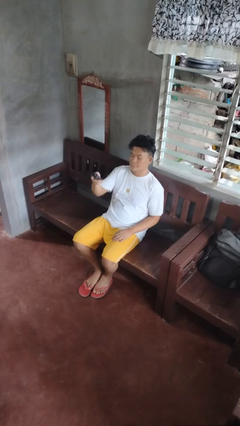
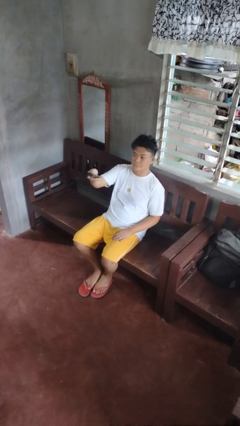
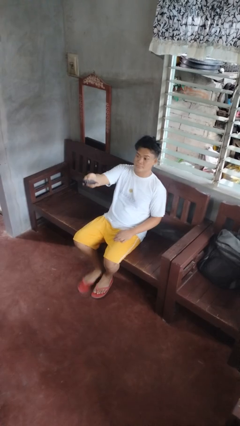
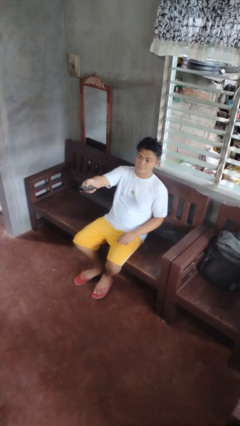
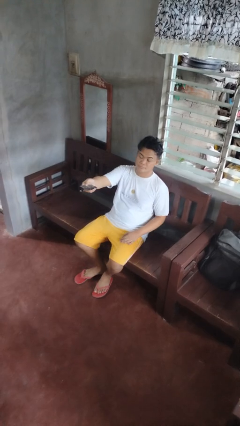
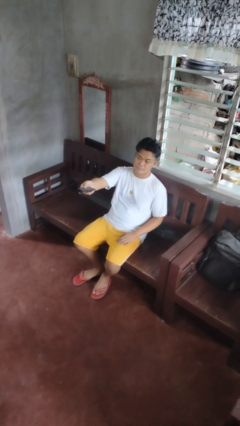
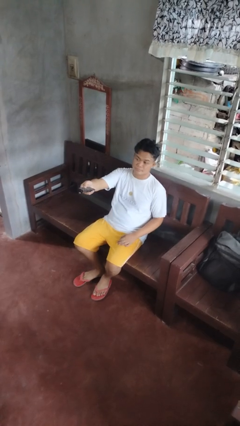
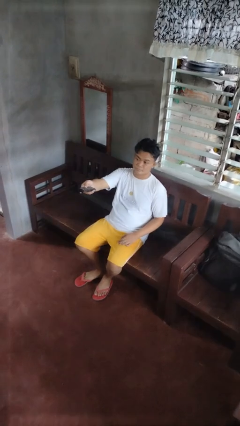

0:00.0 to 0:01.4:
person uses television remote

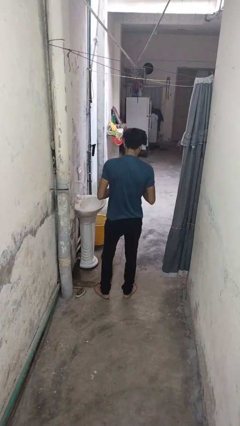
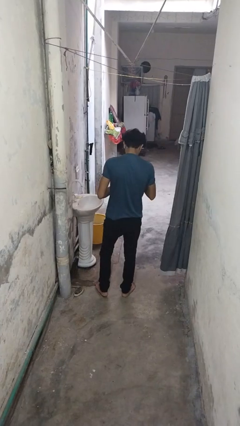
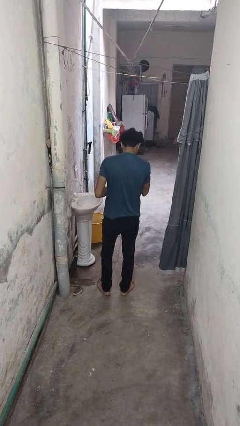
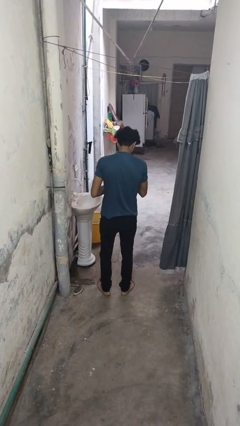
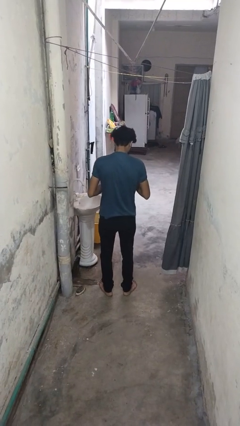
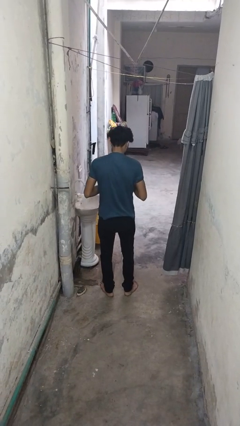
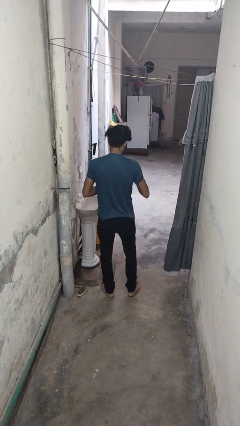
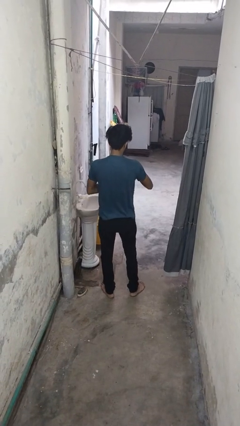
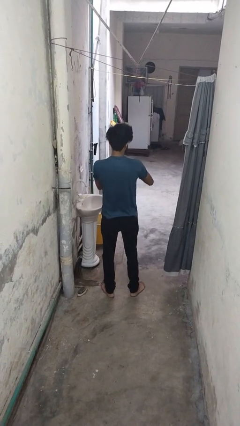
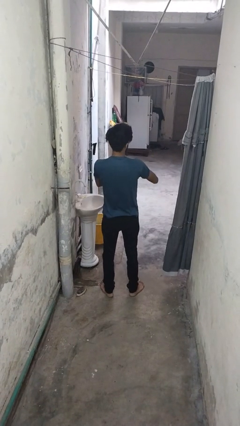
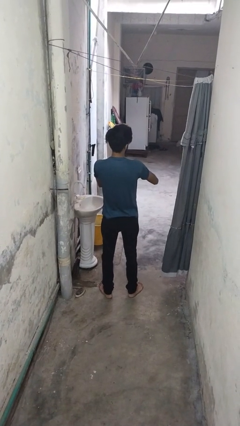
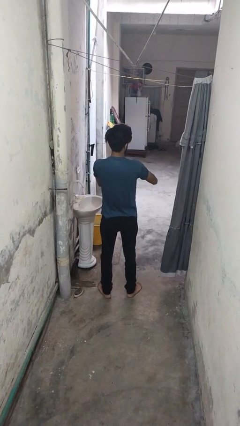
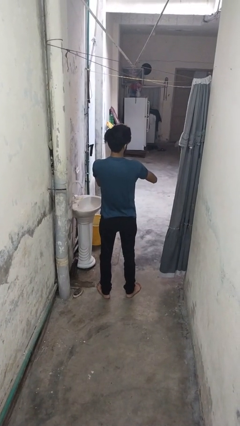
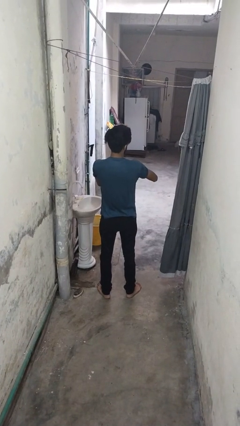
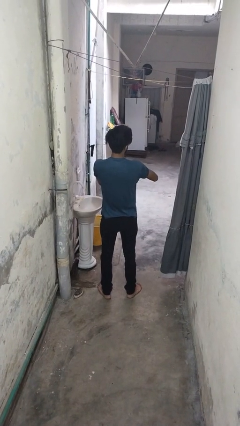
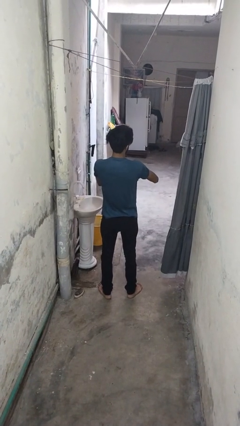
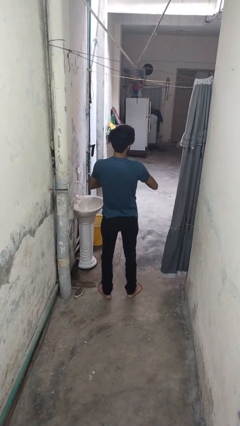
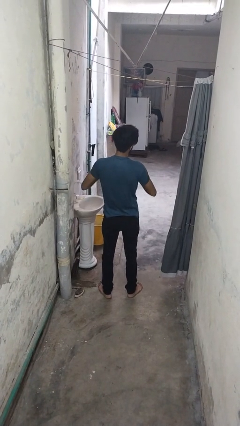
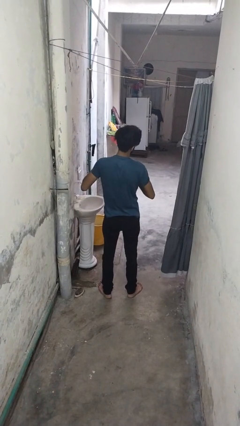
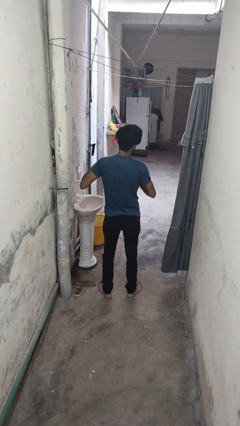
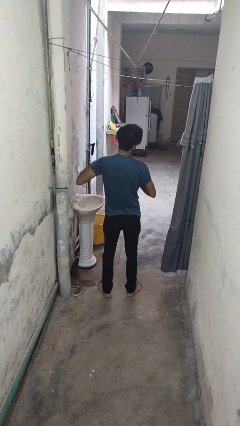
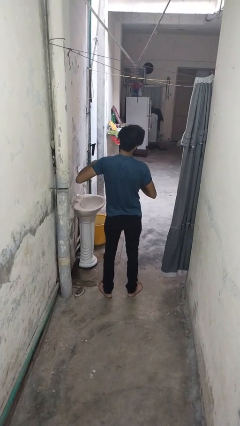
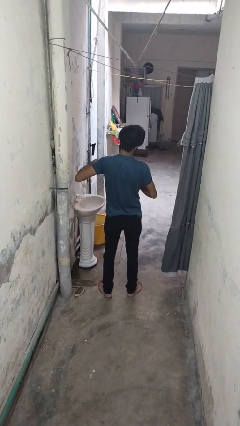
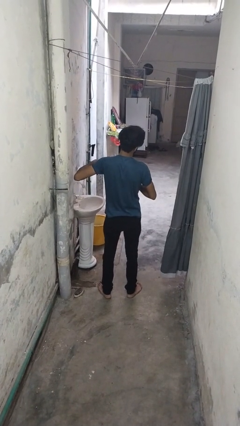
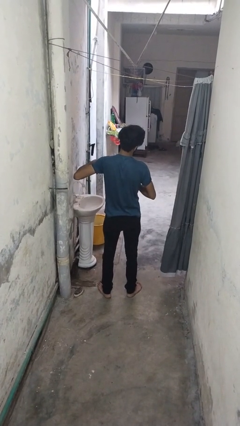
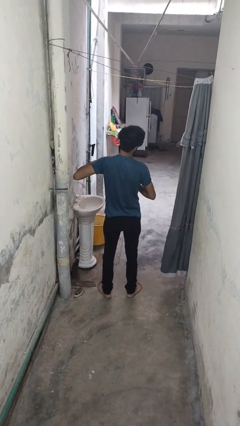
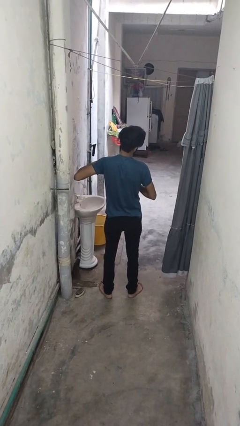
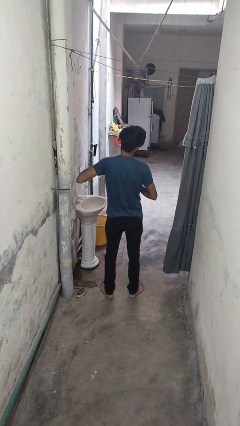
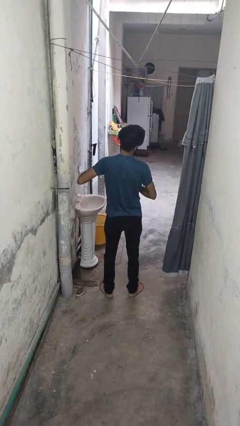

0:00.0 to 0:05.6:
person applies deodorant

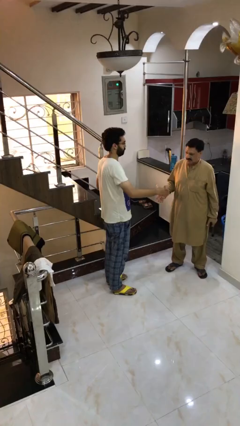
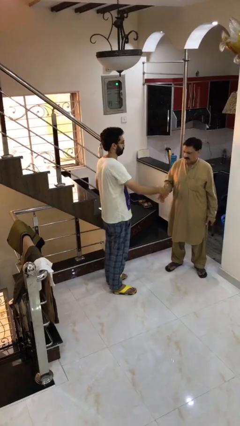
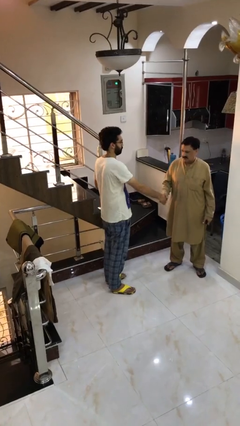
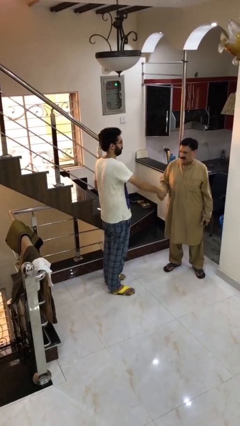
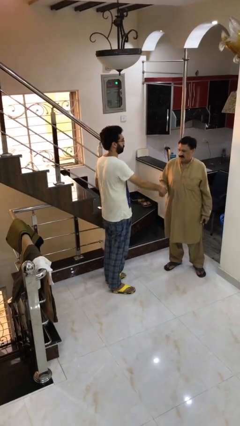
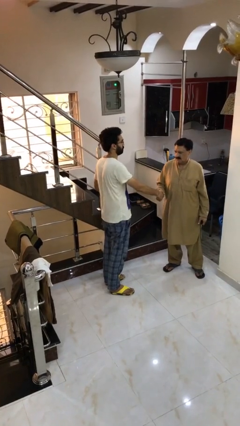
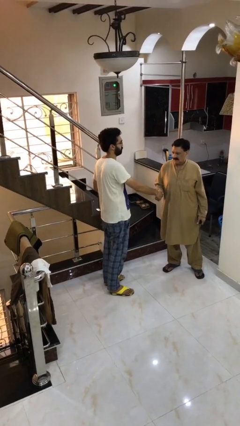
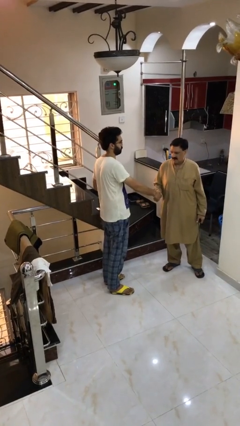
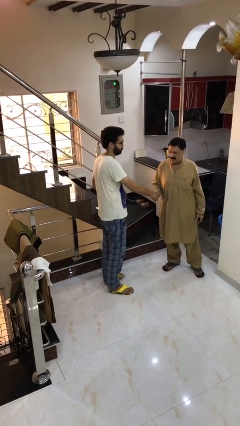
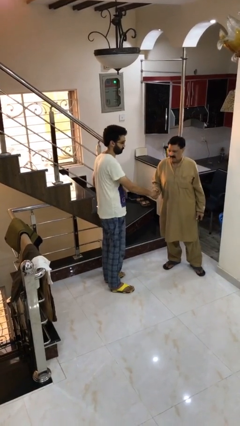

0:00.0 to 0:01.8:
person shakes hand

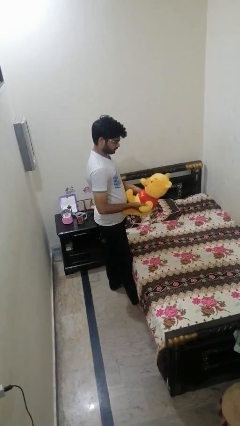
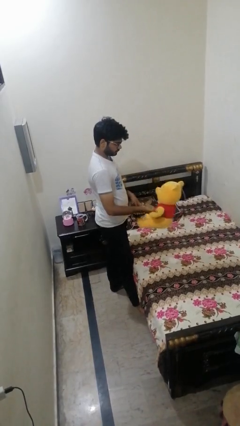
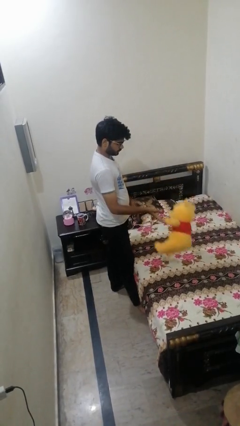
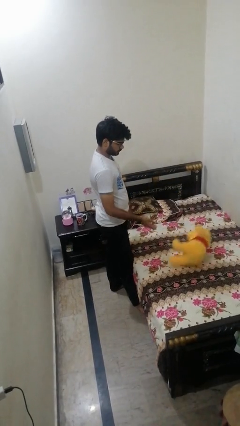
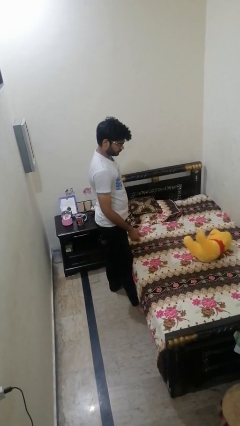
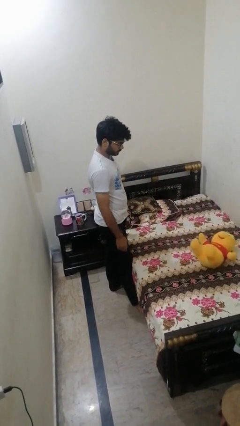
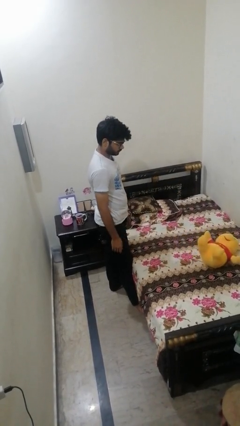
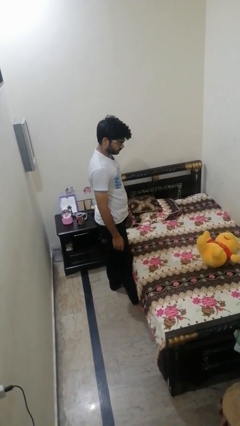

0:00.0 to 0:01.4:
person puts down object on bed

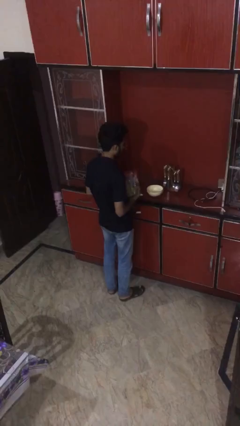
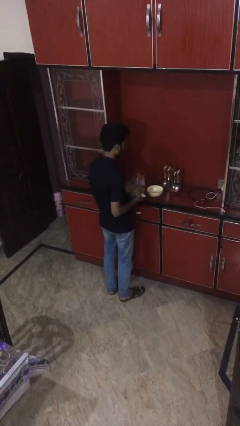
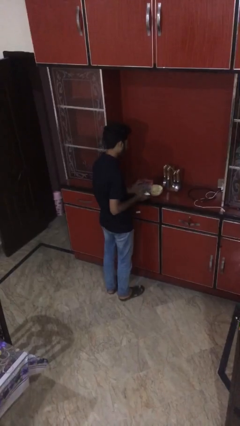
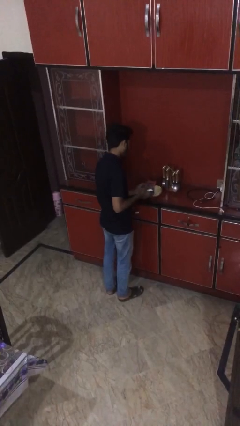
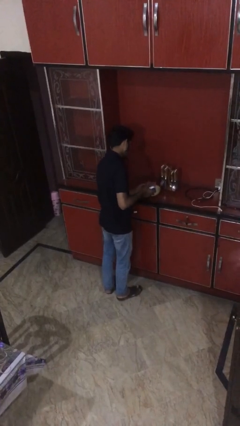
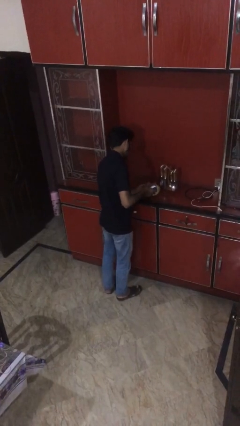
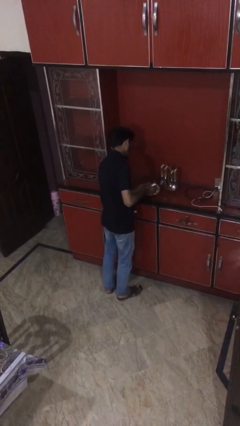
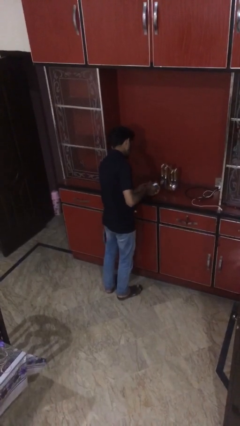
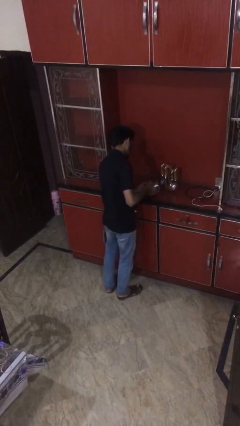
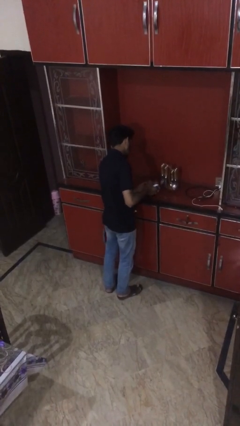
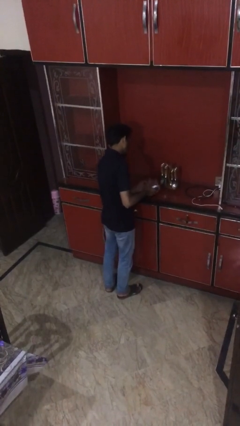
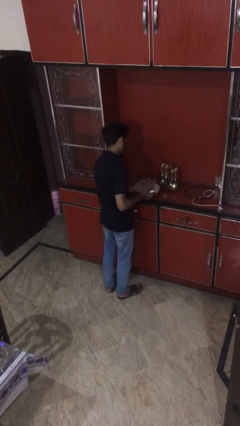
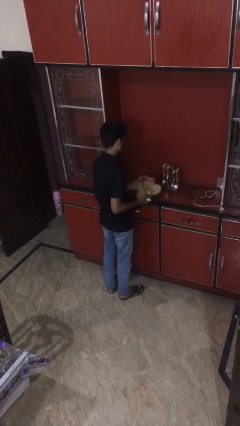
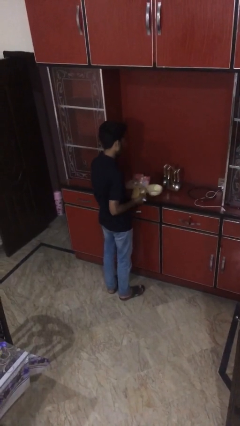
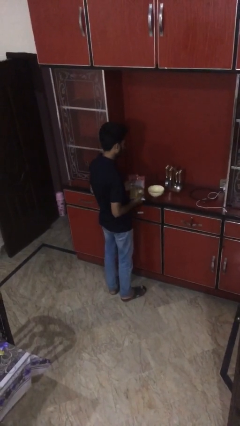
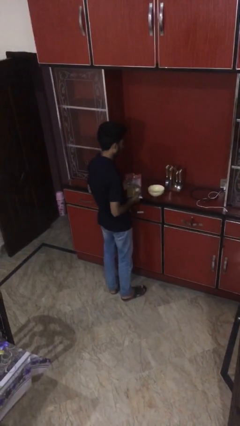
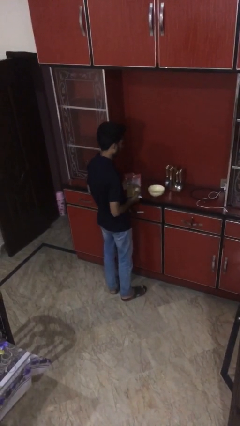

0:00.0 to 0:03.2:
person pours into bowl

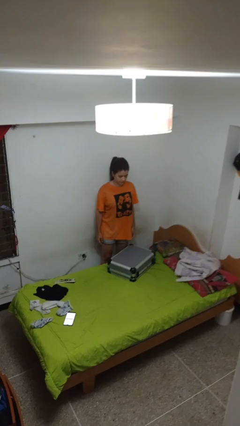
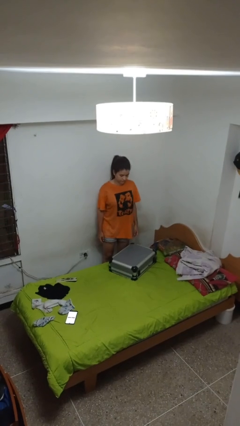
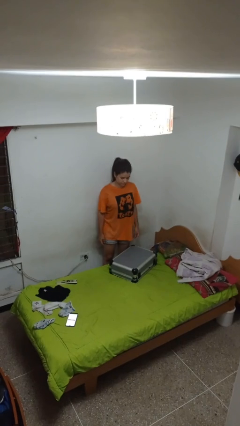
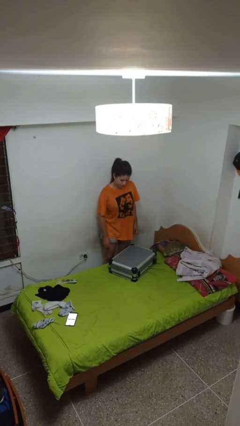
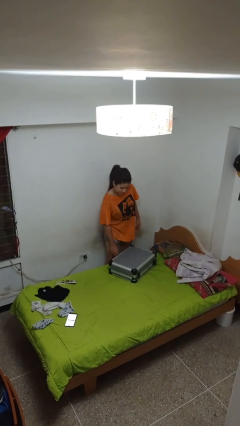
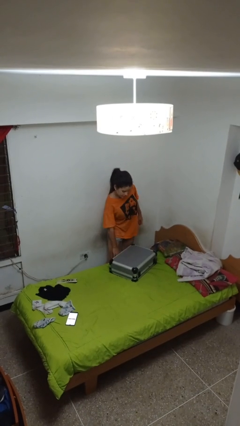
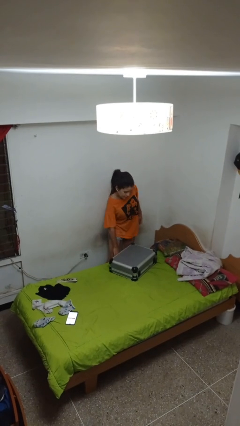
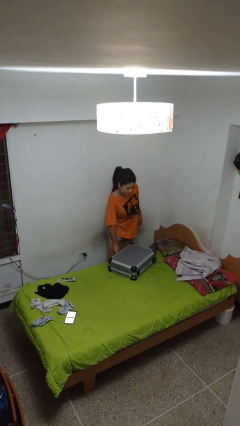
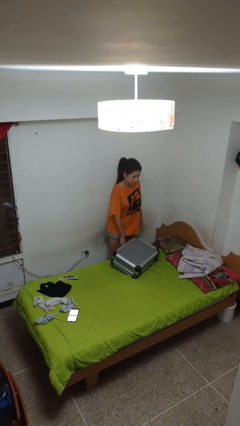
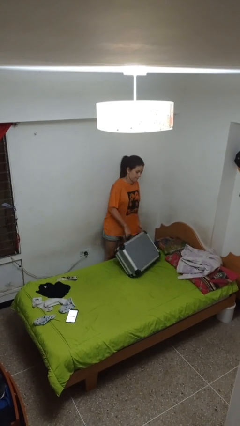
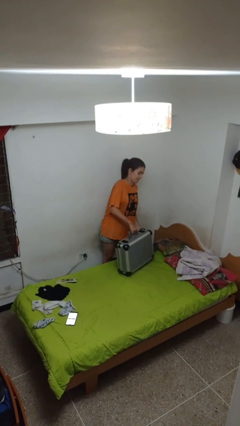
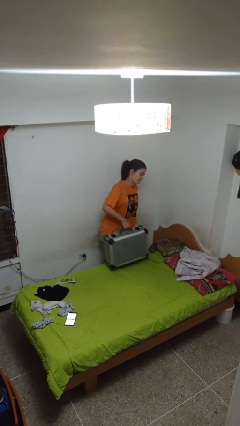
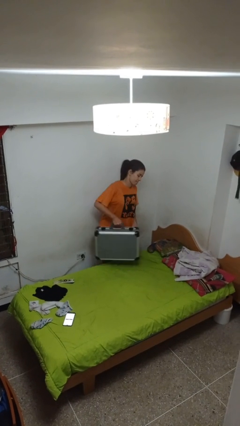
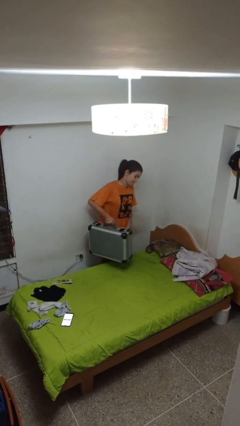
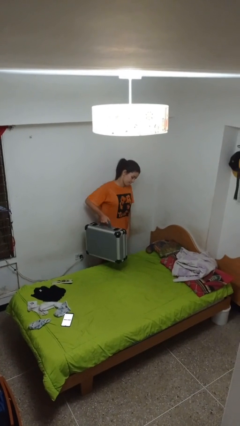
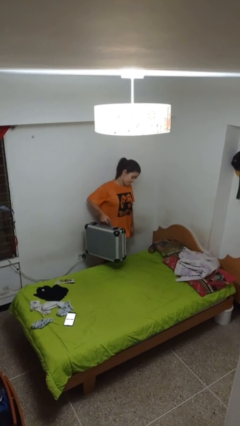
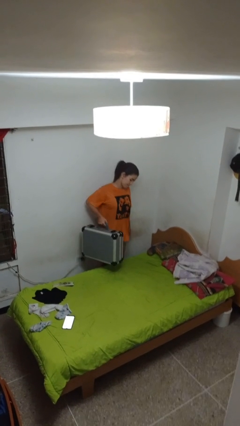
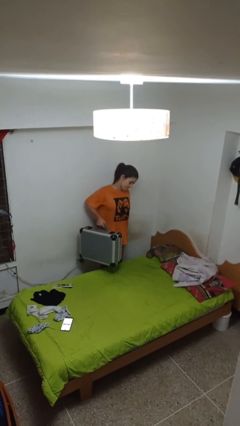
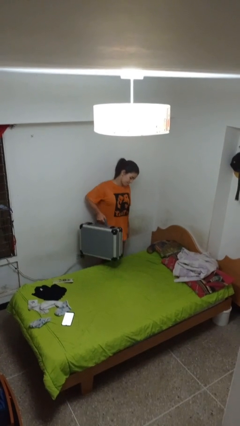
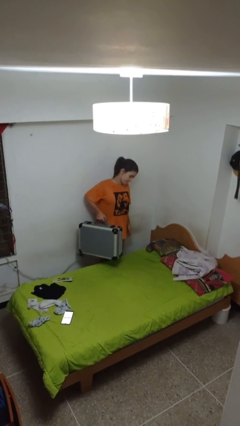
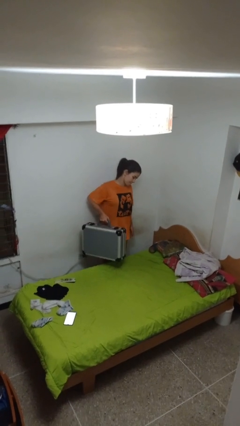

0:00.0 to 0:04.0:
person picks up object from bed
